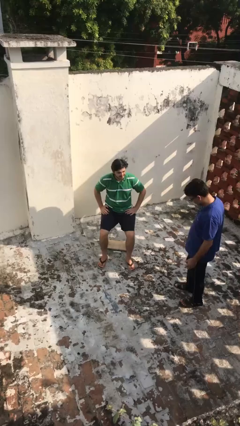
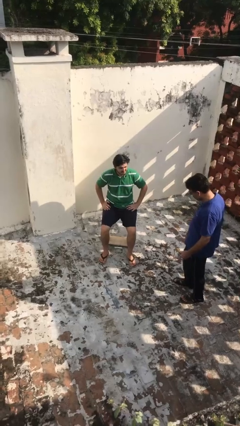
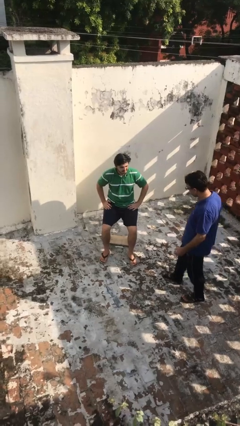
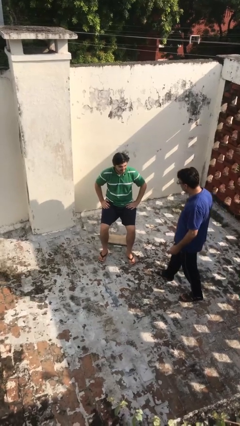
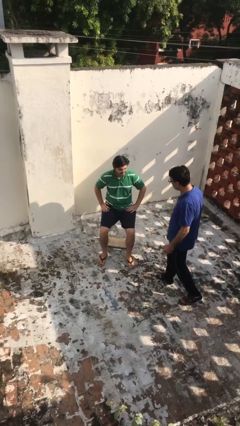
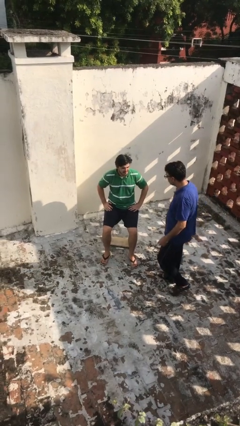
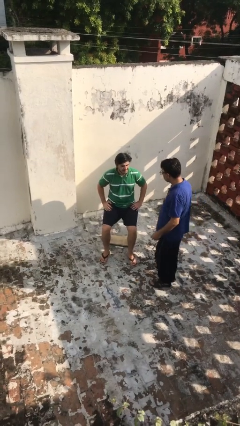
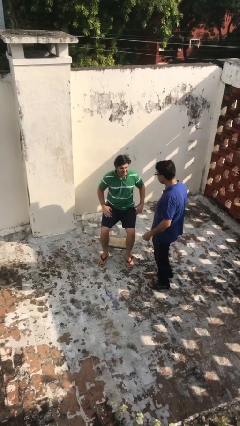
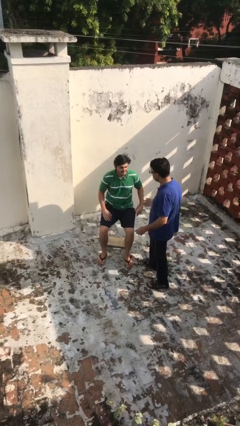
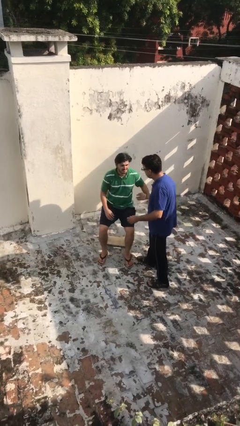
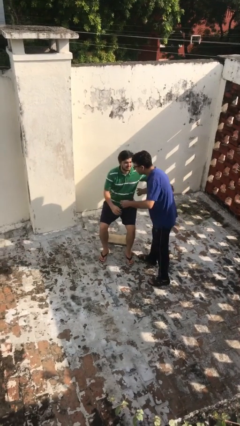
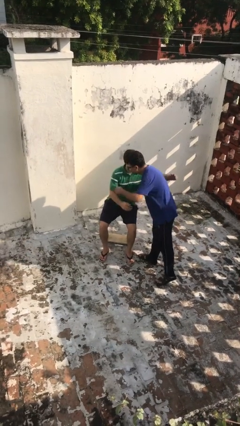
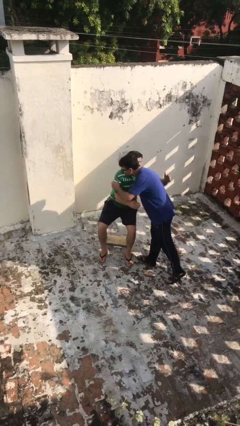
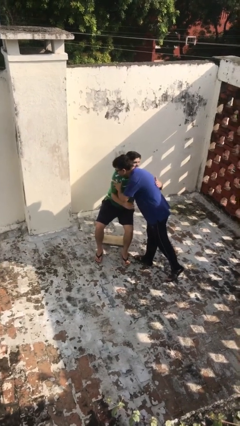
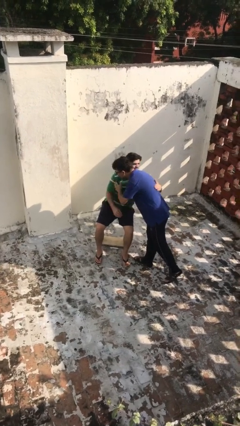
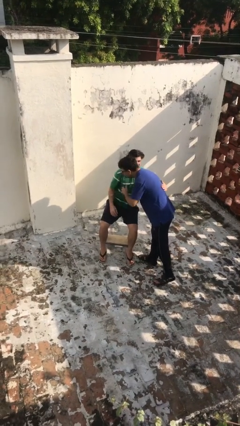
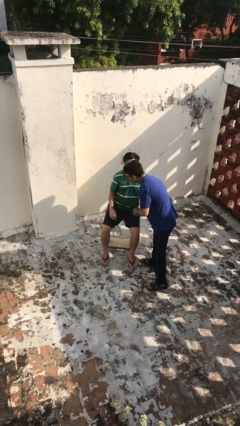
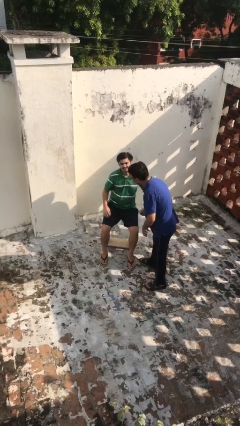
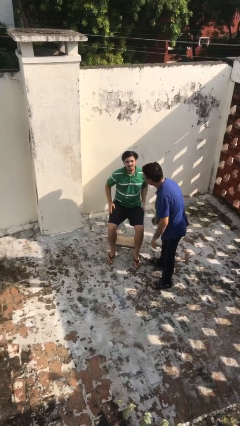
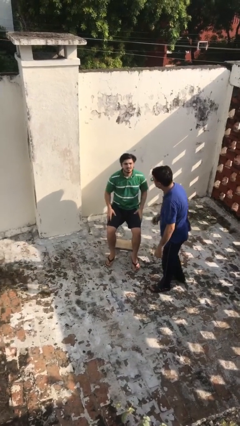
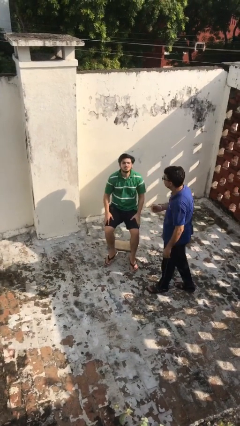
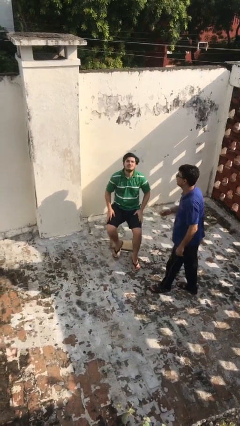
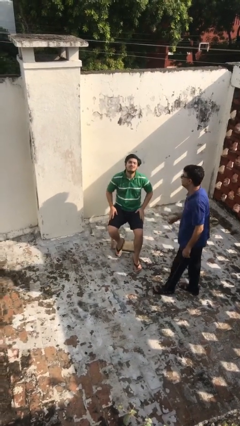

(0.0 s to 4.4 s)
person embraces person

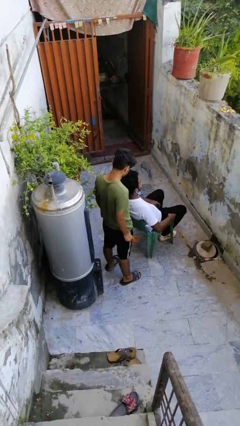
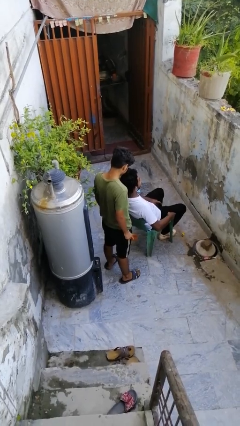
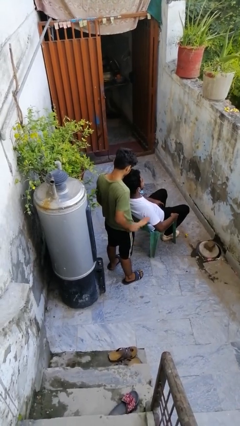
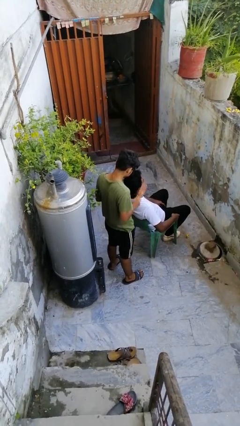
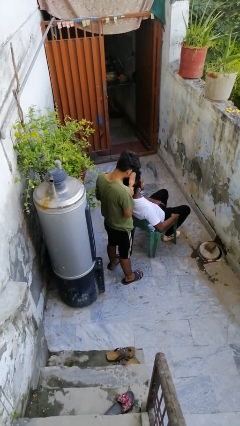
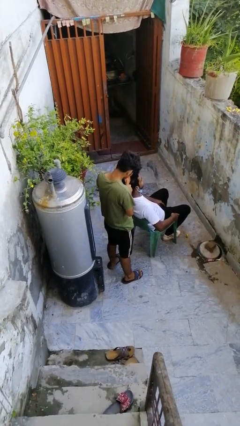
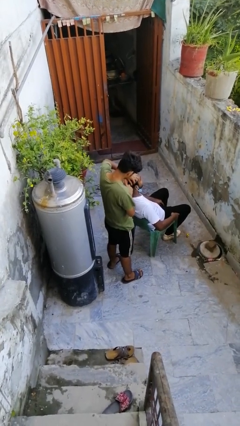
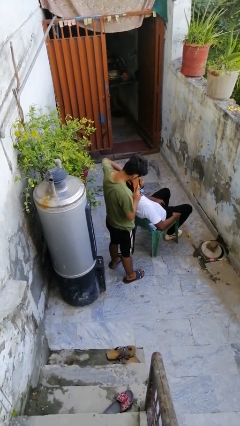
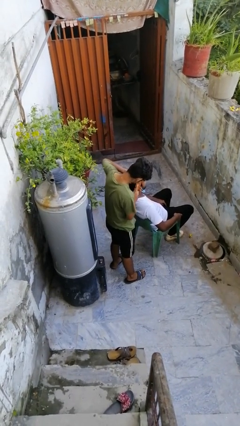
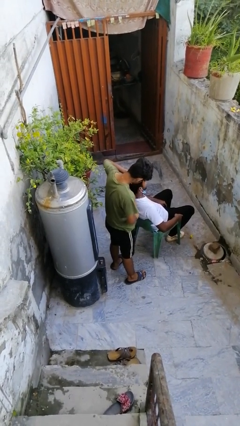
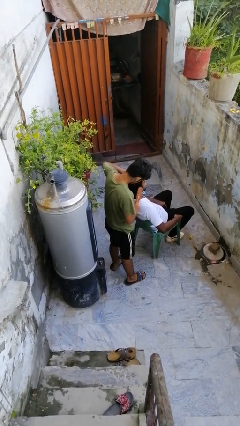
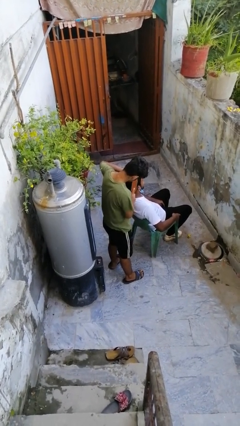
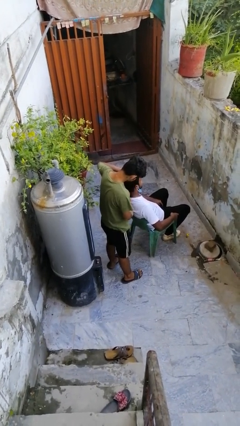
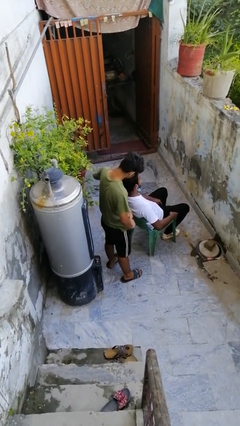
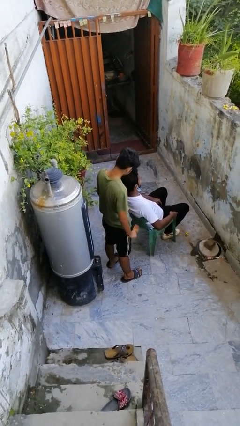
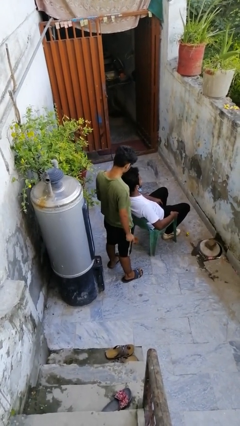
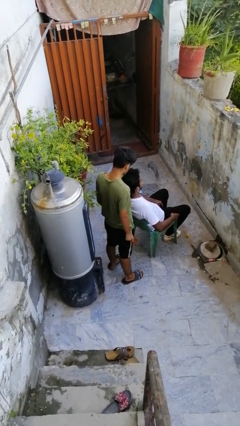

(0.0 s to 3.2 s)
person brushes hair of person

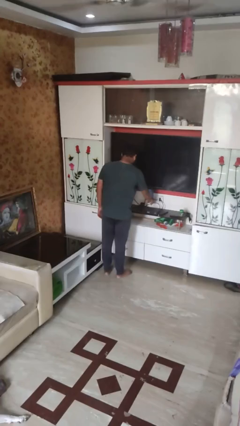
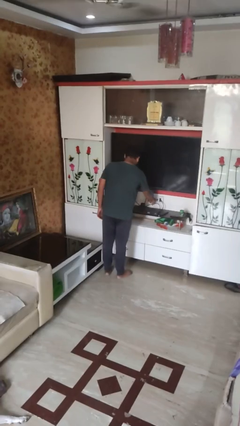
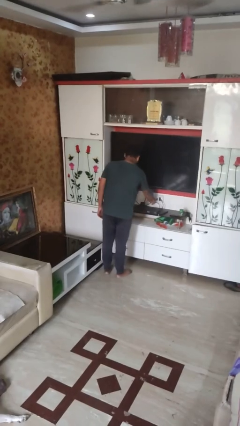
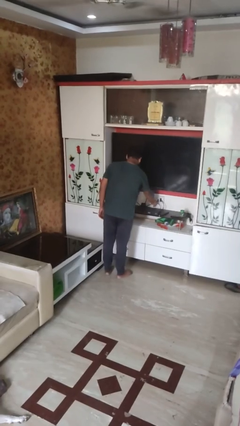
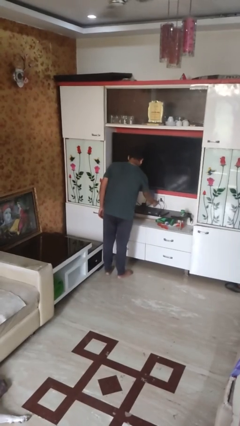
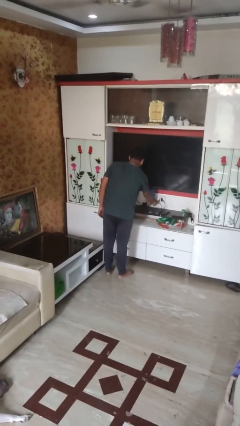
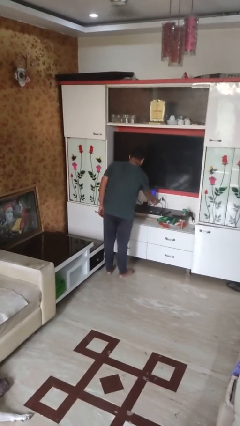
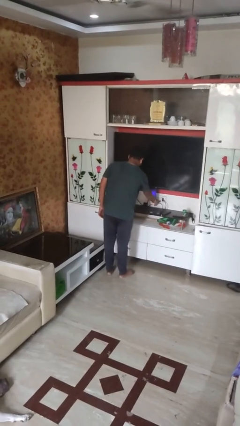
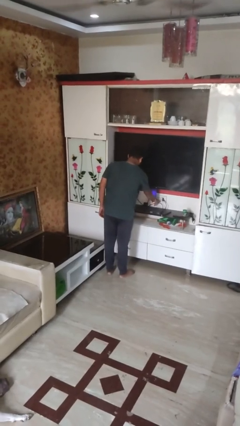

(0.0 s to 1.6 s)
person turns on lamp

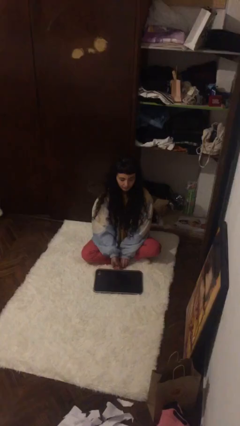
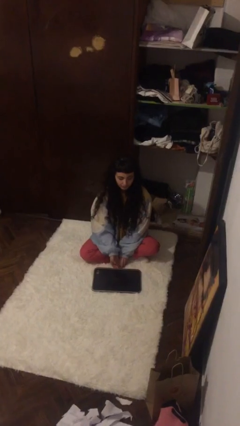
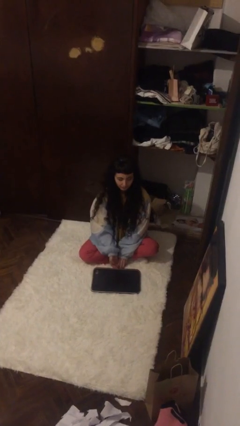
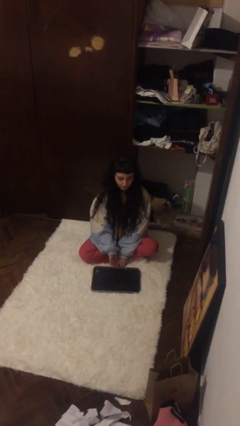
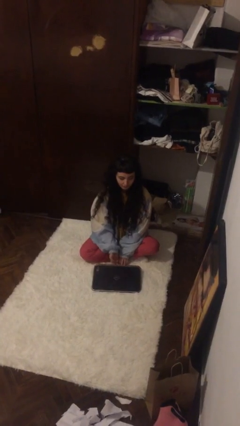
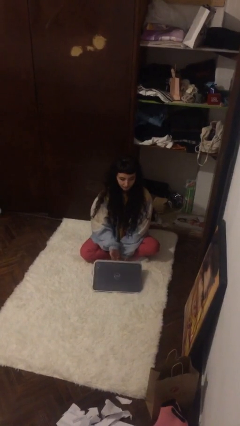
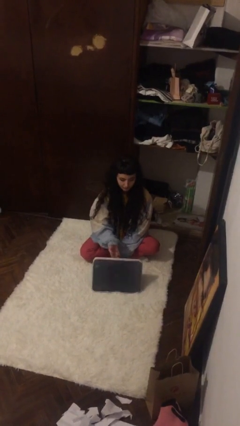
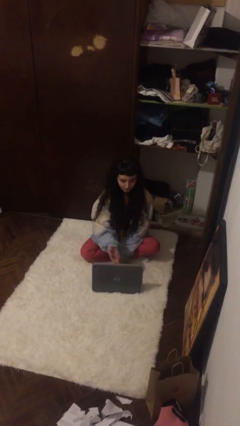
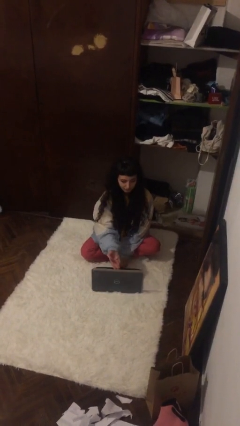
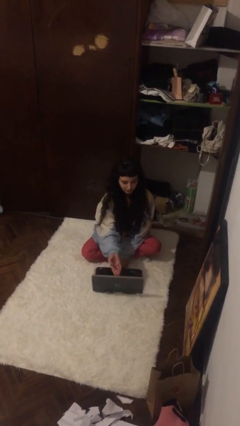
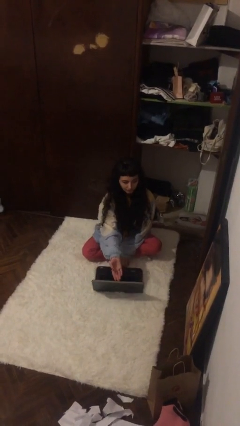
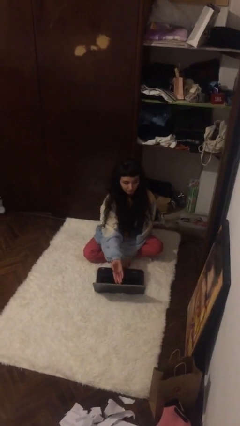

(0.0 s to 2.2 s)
person opens laptop

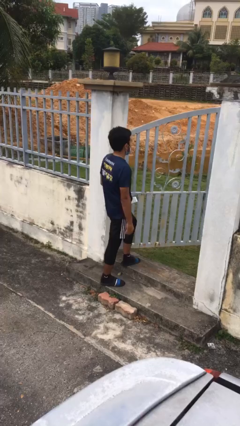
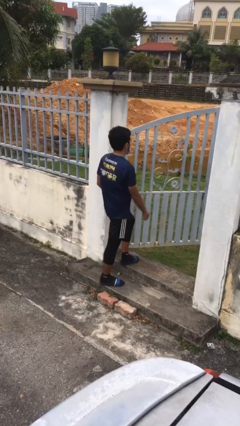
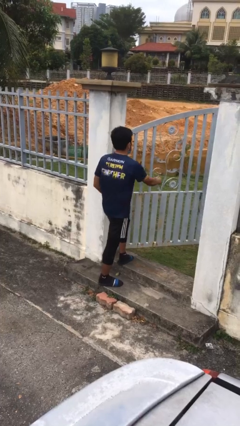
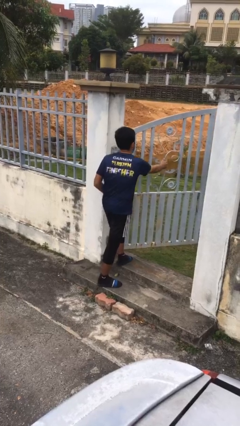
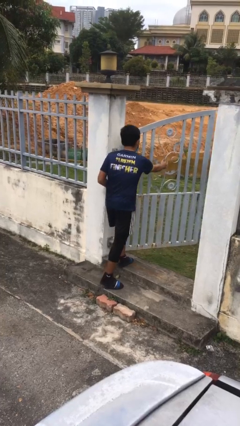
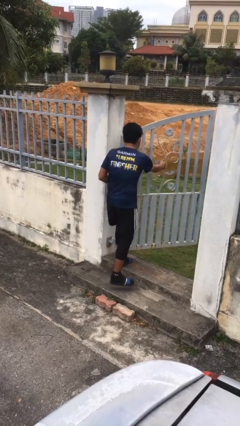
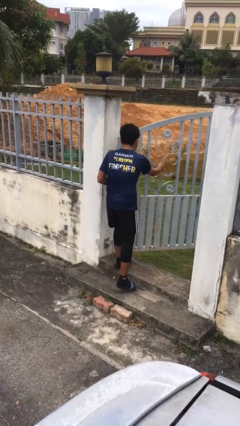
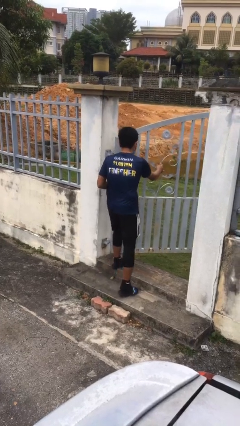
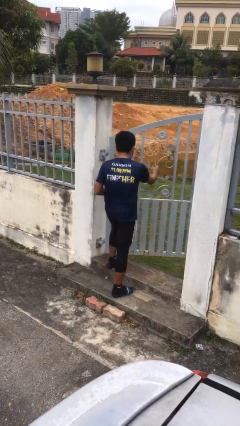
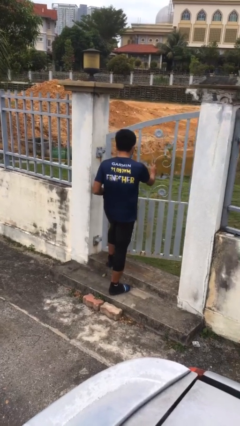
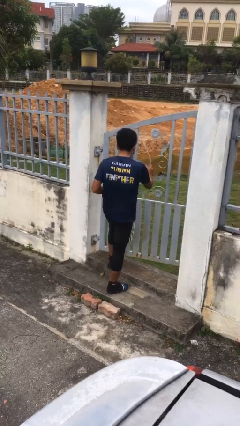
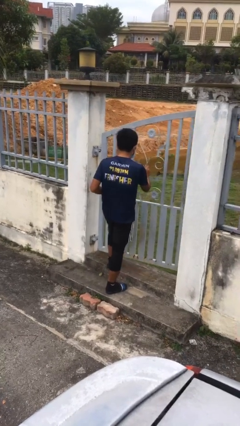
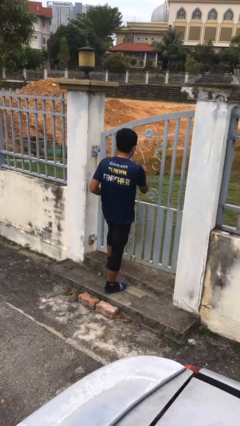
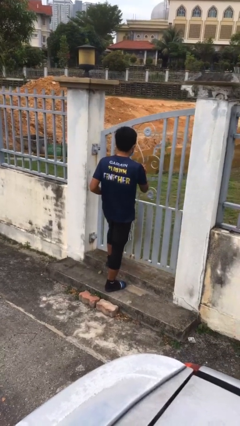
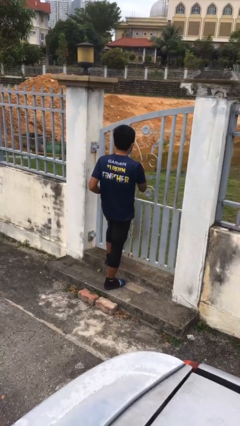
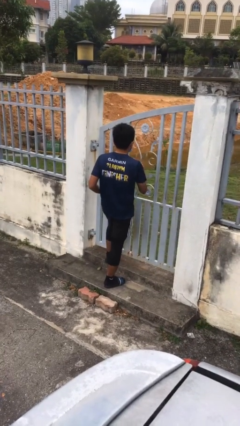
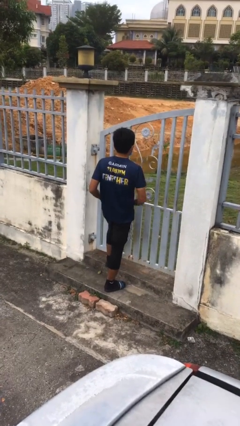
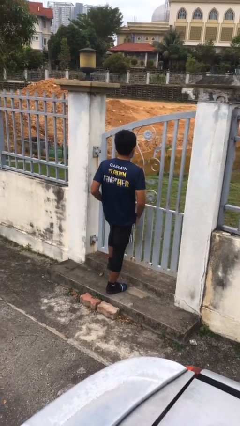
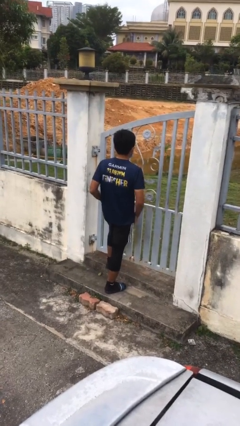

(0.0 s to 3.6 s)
person closes facility door

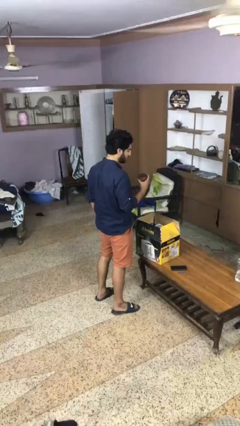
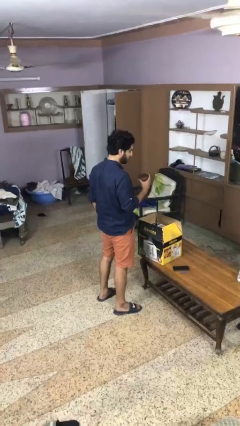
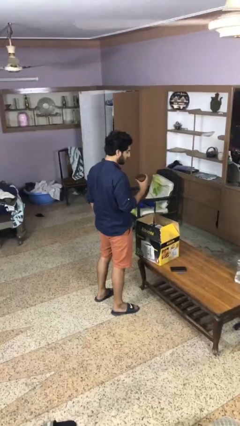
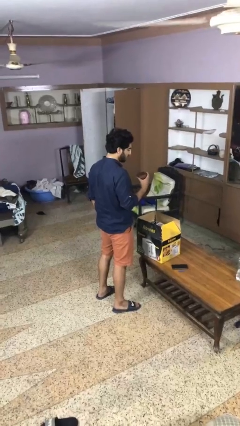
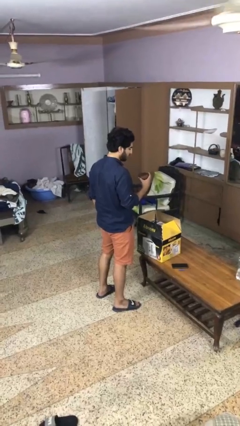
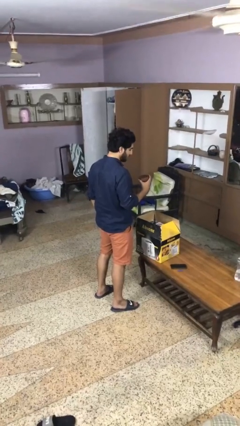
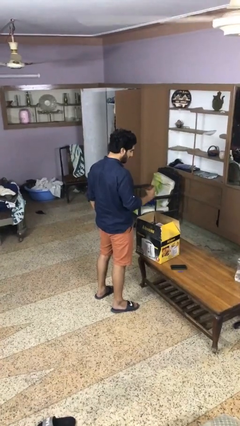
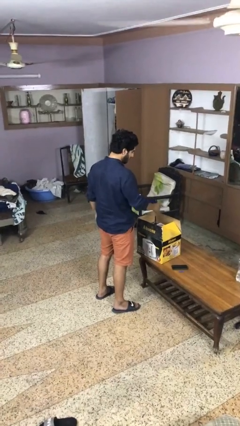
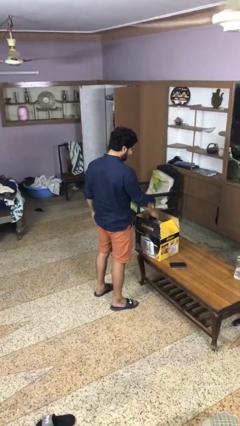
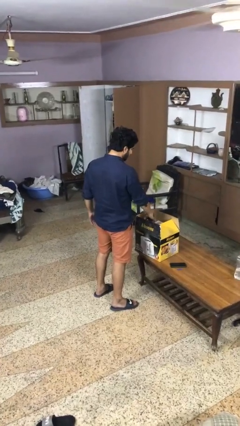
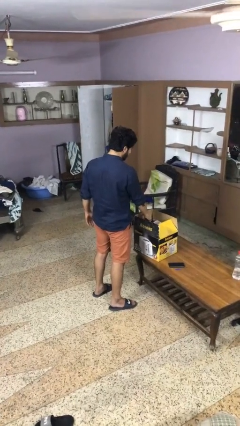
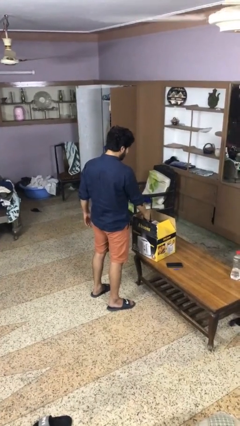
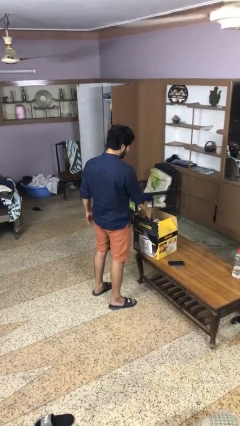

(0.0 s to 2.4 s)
person puts object into box
